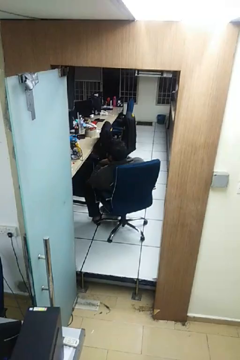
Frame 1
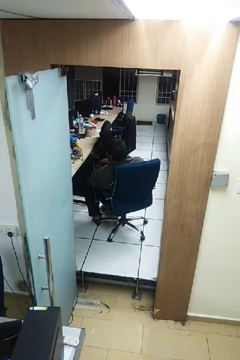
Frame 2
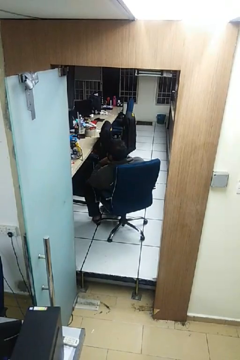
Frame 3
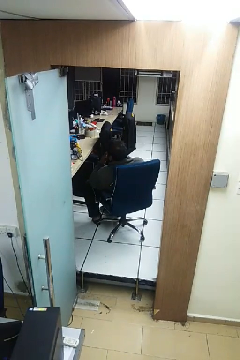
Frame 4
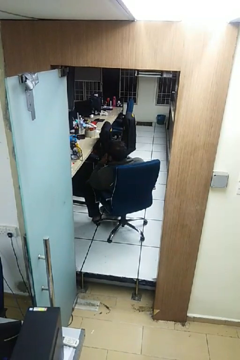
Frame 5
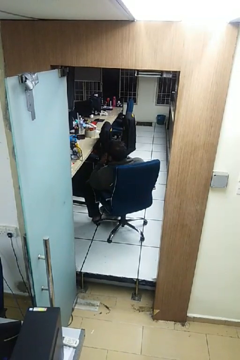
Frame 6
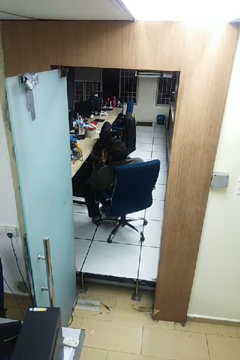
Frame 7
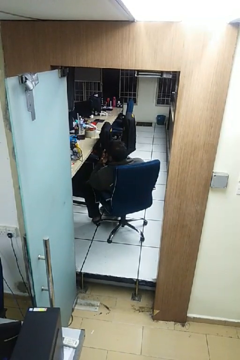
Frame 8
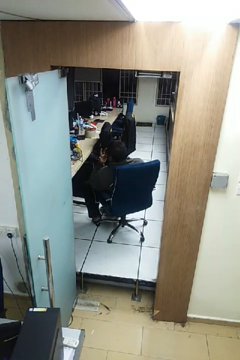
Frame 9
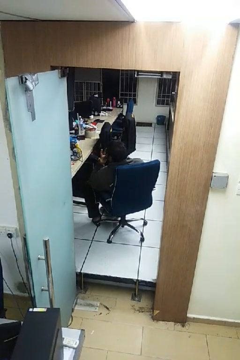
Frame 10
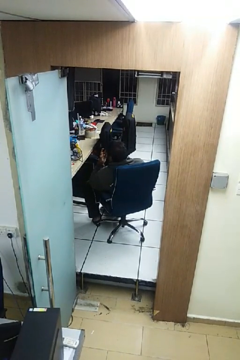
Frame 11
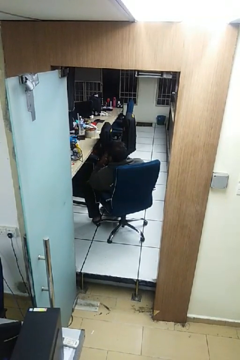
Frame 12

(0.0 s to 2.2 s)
person licks fingers

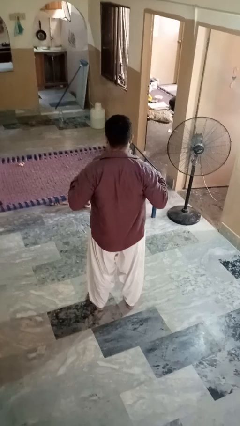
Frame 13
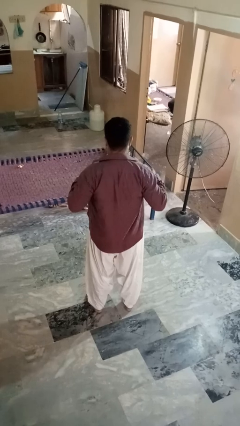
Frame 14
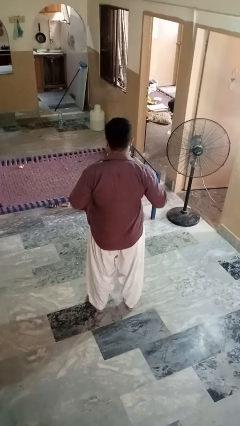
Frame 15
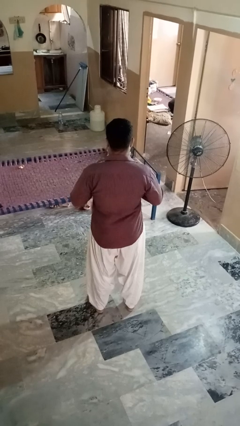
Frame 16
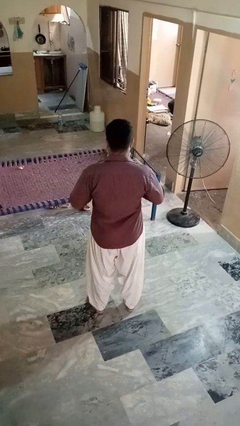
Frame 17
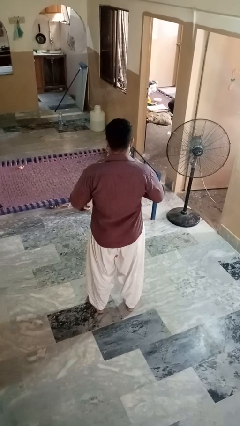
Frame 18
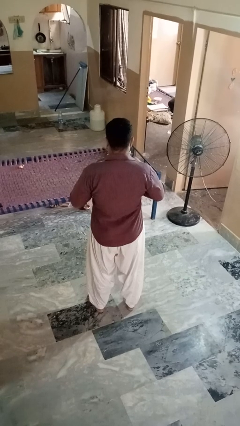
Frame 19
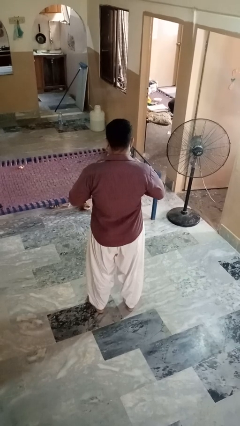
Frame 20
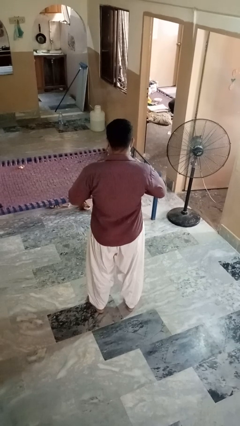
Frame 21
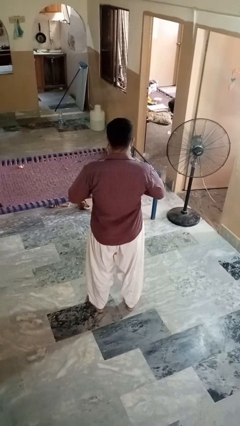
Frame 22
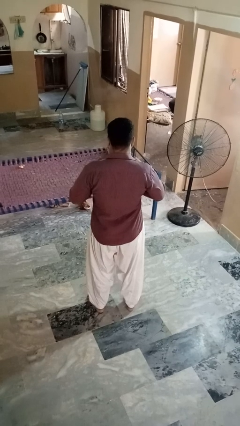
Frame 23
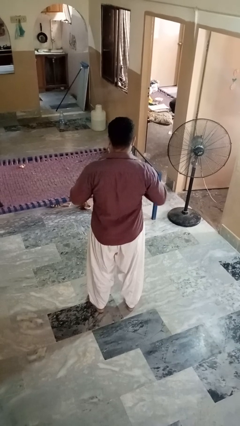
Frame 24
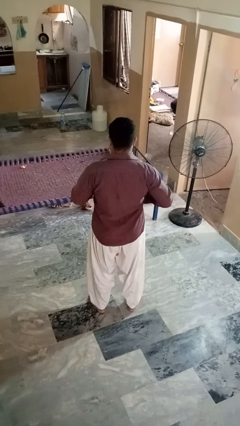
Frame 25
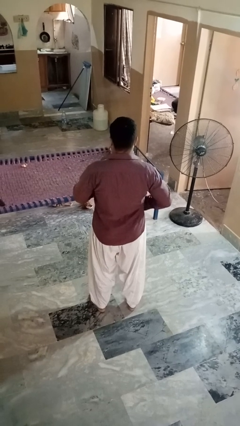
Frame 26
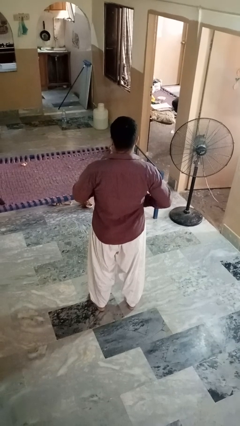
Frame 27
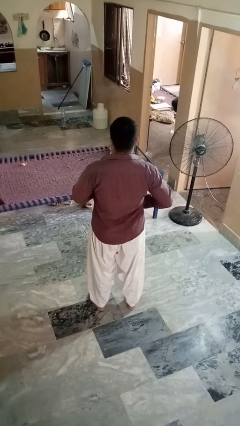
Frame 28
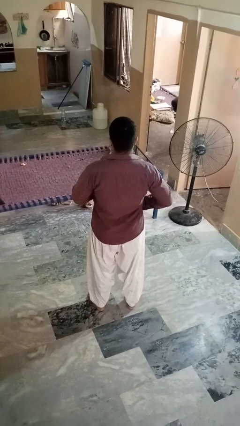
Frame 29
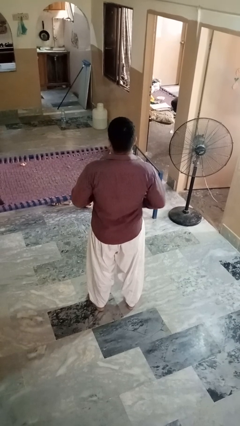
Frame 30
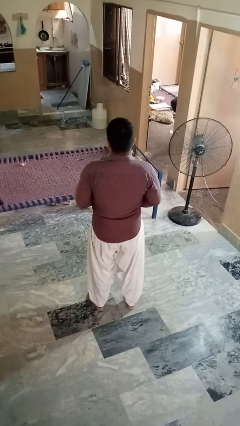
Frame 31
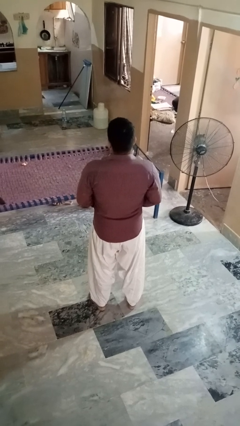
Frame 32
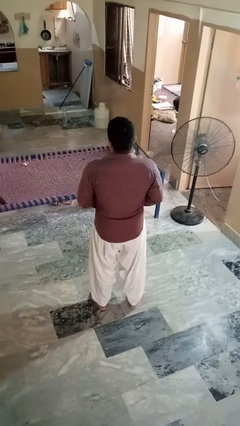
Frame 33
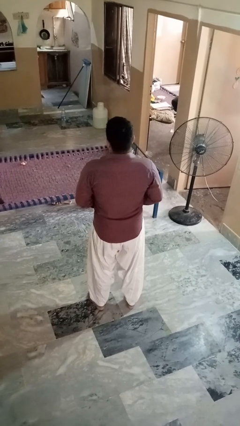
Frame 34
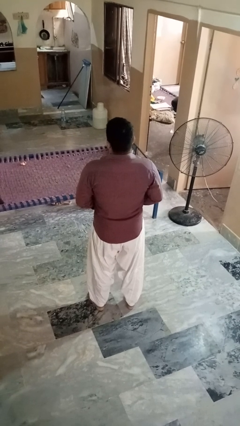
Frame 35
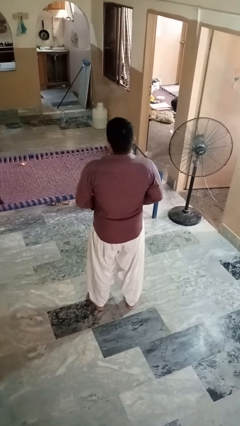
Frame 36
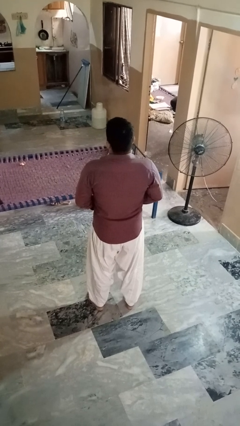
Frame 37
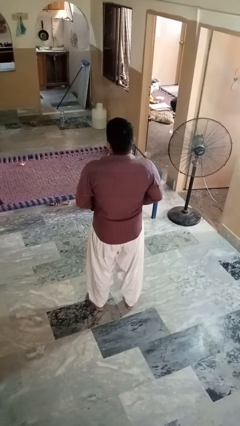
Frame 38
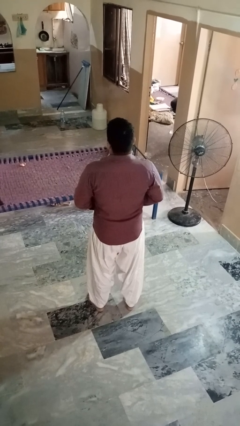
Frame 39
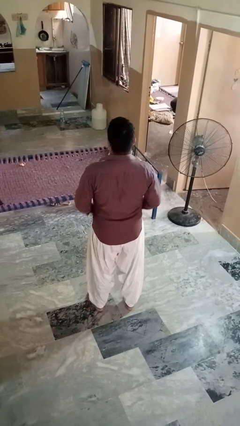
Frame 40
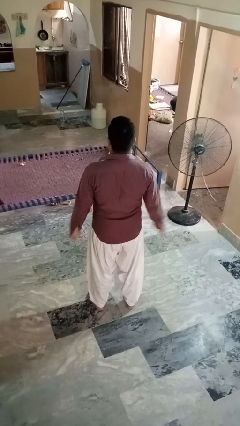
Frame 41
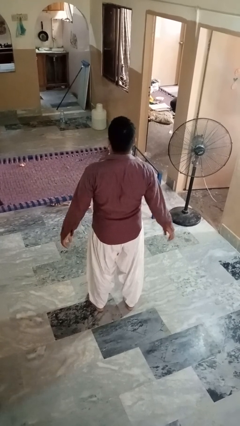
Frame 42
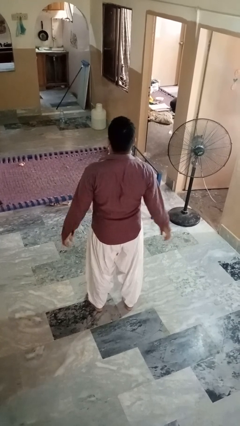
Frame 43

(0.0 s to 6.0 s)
person buttons shirt

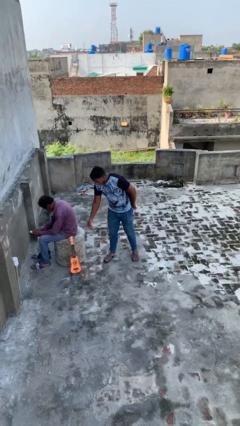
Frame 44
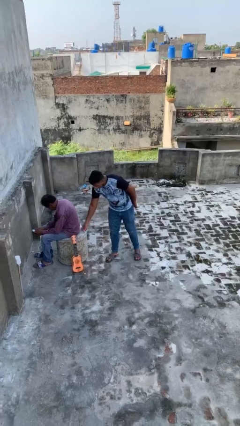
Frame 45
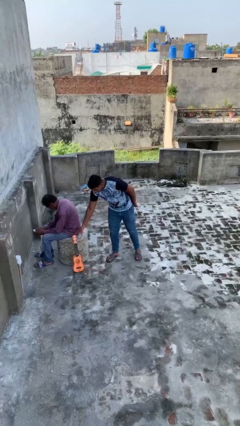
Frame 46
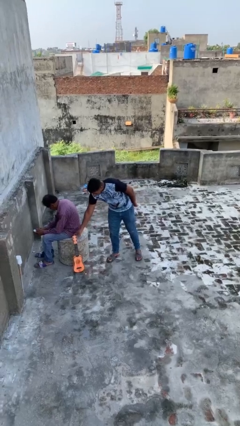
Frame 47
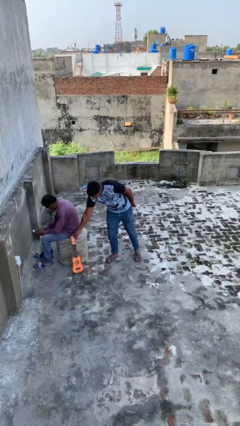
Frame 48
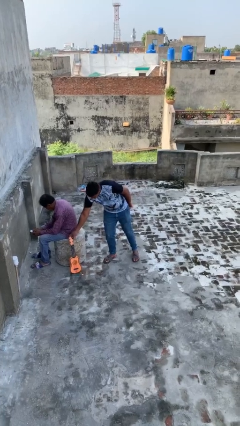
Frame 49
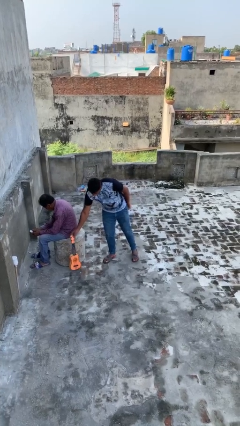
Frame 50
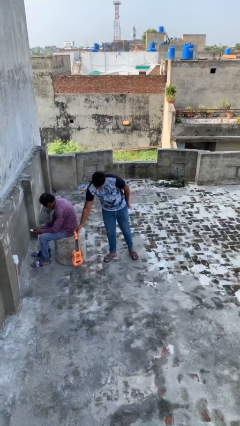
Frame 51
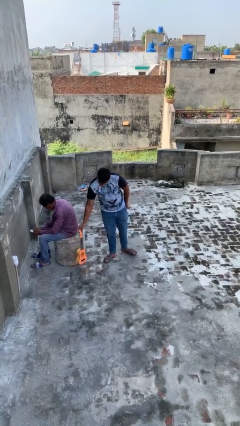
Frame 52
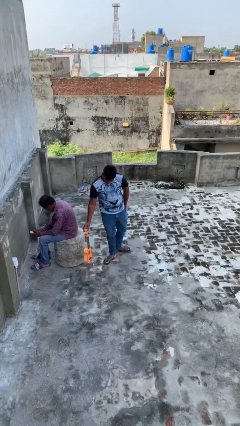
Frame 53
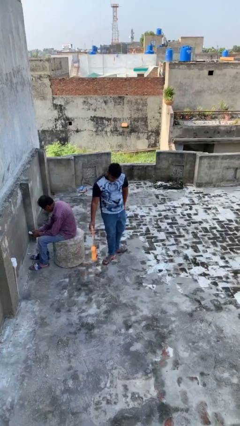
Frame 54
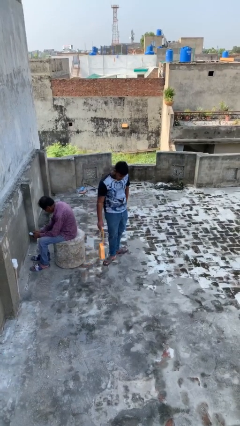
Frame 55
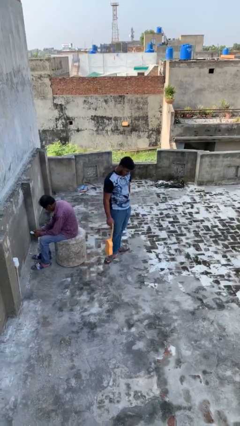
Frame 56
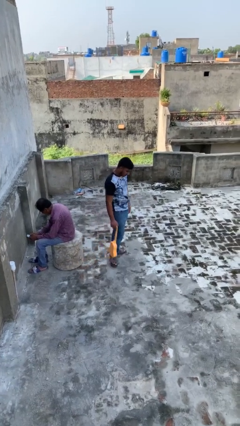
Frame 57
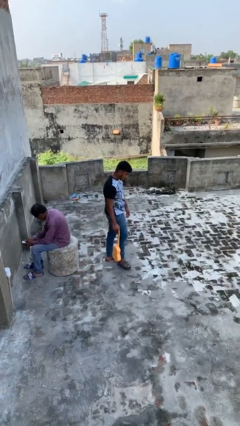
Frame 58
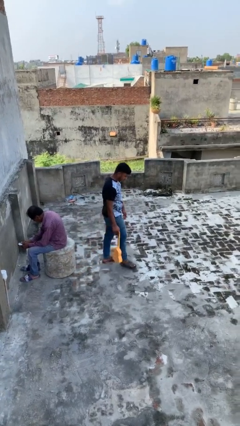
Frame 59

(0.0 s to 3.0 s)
person steals object from person

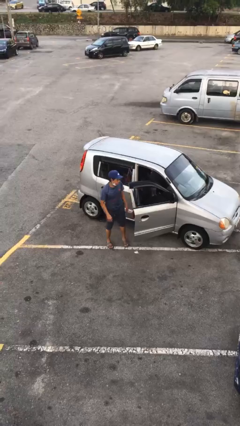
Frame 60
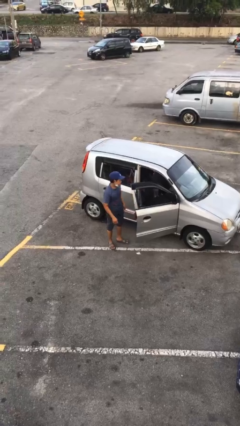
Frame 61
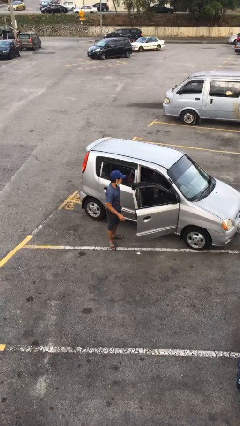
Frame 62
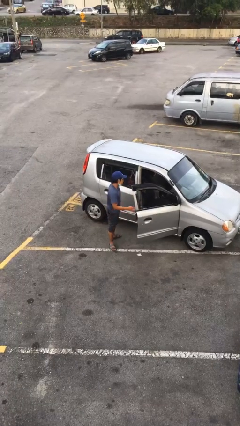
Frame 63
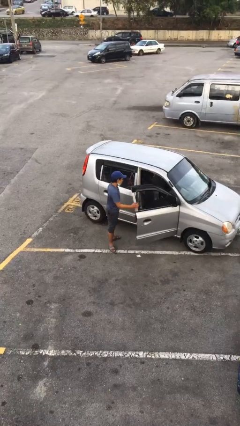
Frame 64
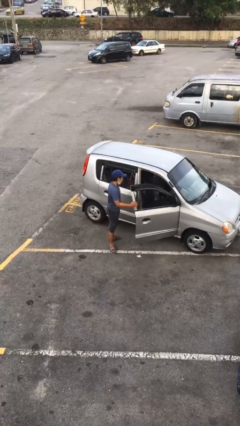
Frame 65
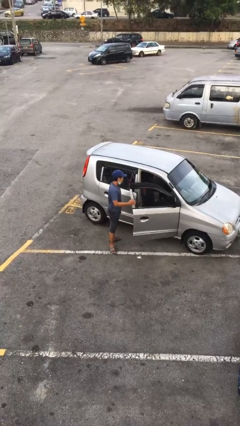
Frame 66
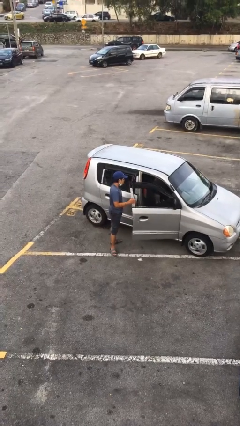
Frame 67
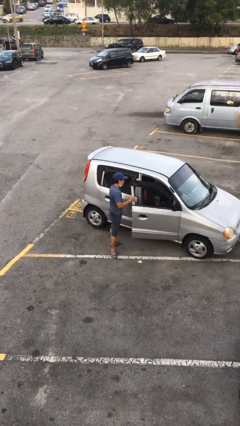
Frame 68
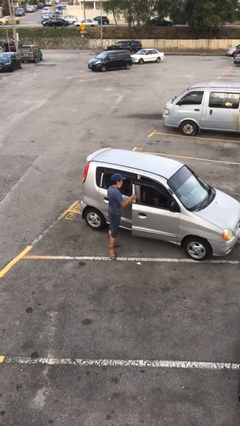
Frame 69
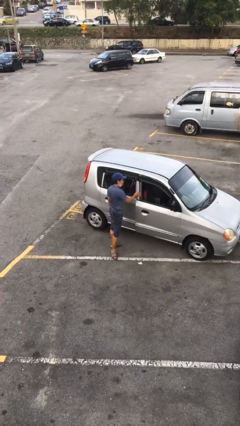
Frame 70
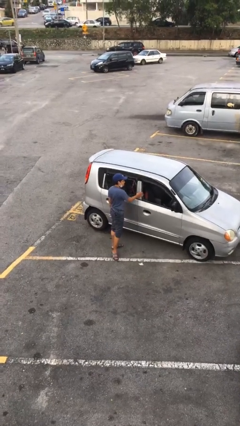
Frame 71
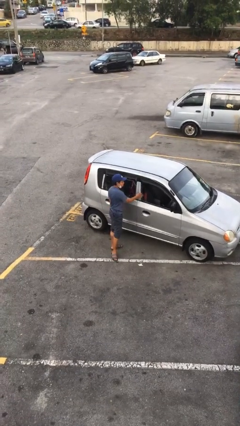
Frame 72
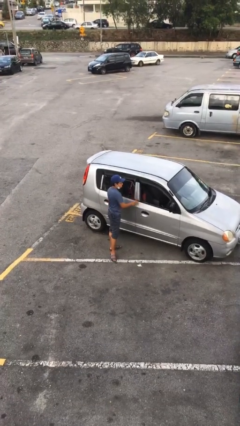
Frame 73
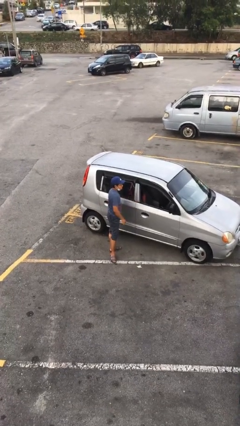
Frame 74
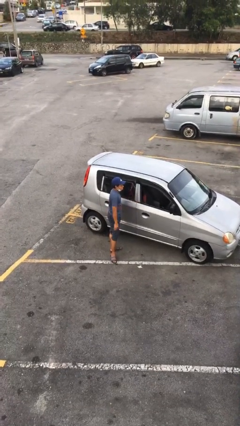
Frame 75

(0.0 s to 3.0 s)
person closes car door

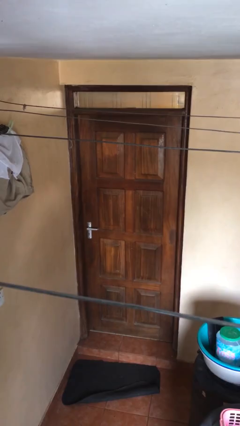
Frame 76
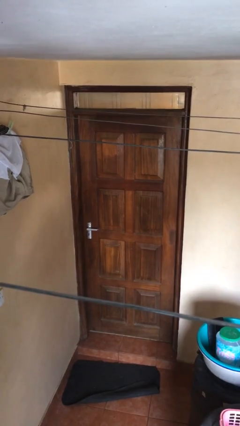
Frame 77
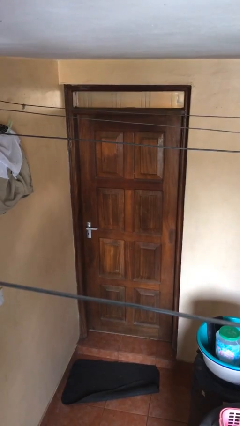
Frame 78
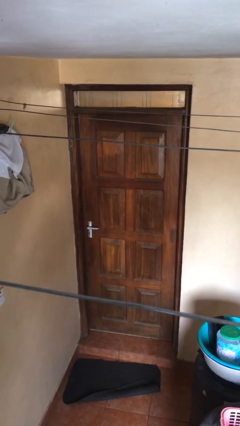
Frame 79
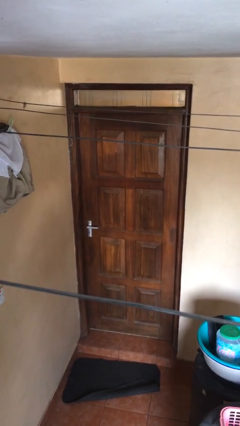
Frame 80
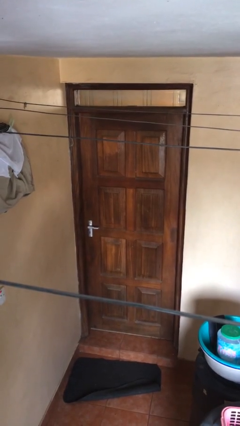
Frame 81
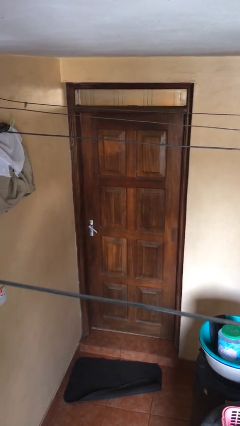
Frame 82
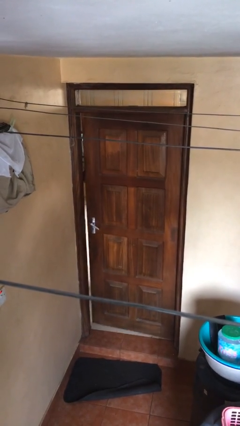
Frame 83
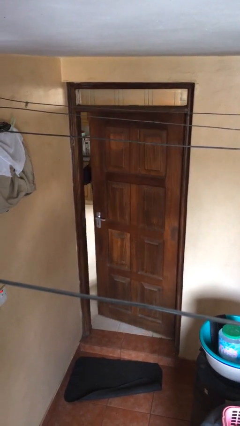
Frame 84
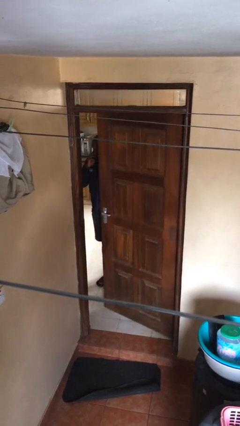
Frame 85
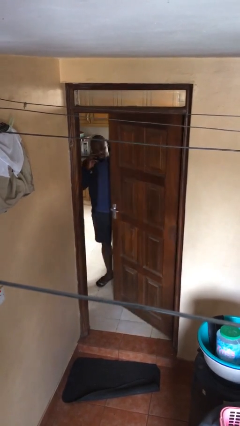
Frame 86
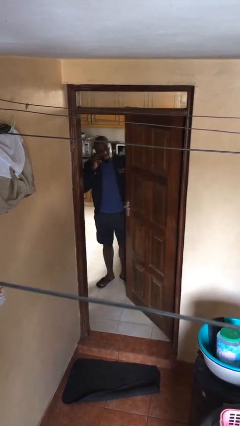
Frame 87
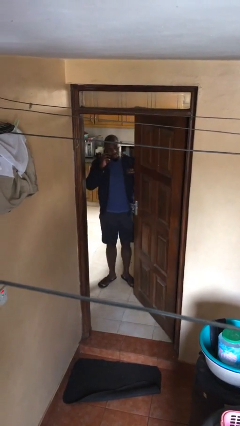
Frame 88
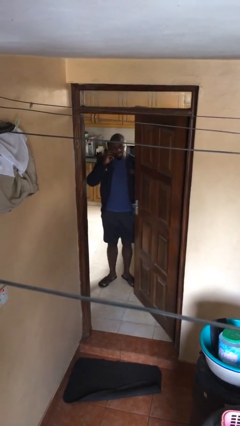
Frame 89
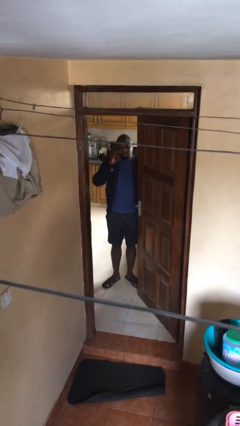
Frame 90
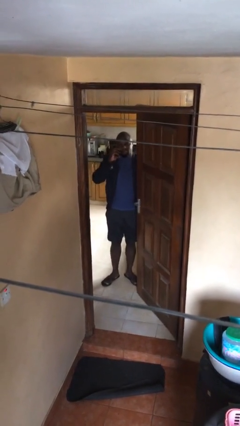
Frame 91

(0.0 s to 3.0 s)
person opens facility door

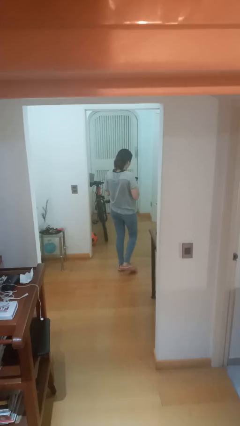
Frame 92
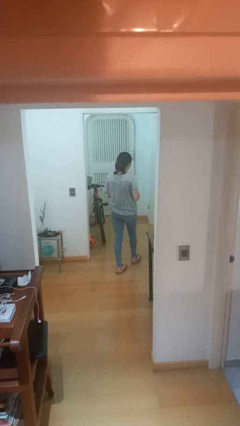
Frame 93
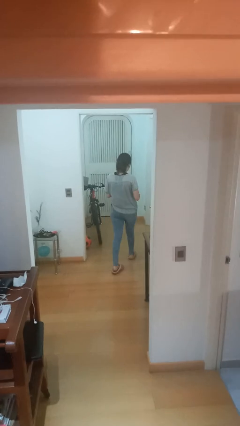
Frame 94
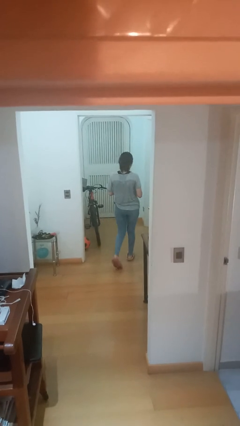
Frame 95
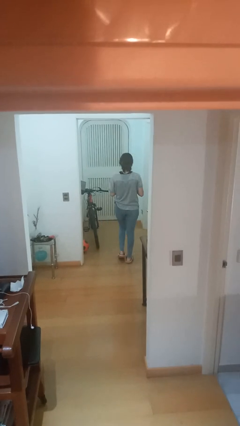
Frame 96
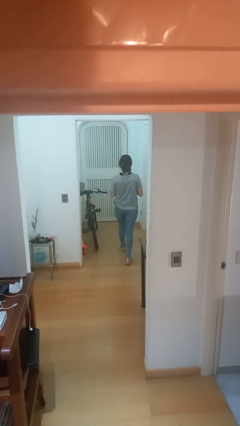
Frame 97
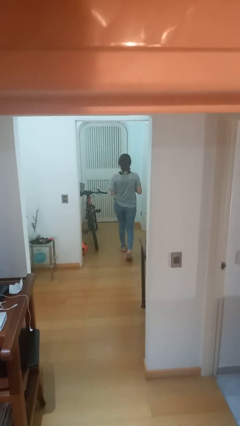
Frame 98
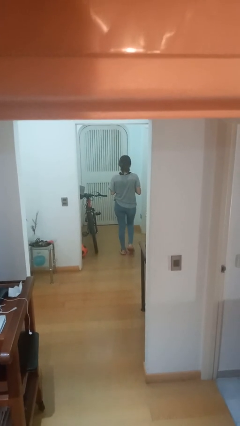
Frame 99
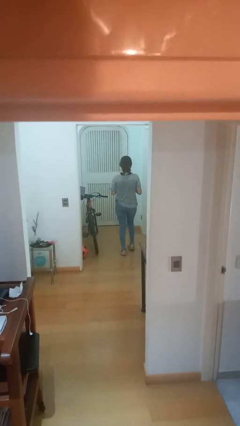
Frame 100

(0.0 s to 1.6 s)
person exits scene through structure
